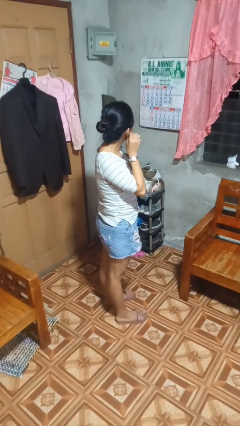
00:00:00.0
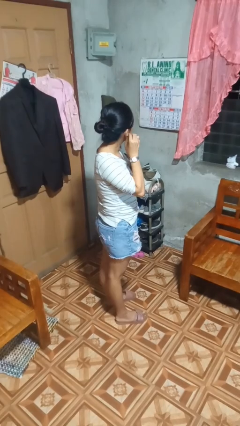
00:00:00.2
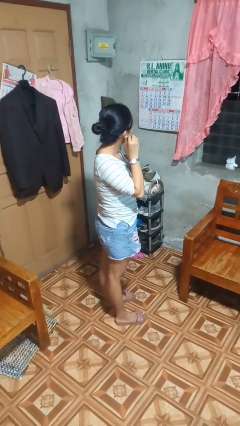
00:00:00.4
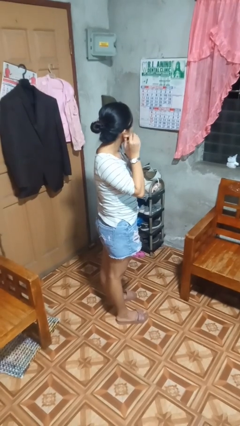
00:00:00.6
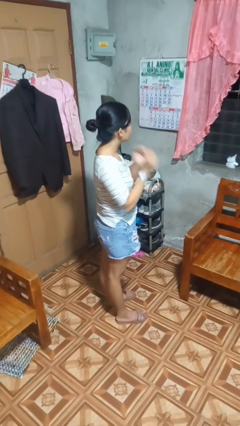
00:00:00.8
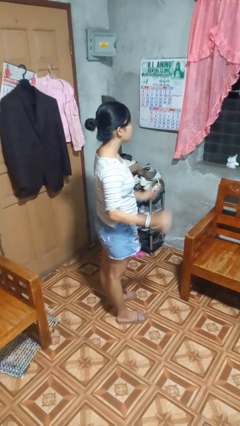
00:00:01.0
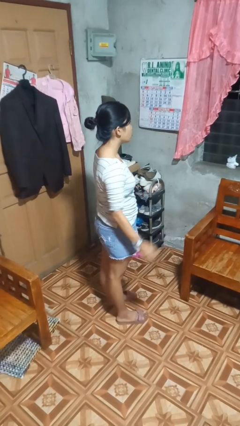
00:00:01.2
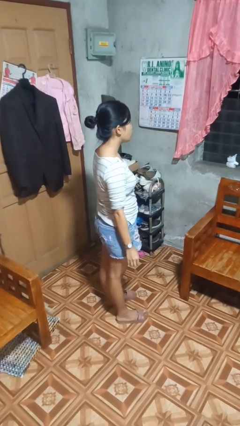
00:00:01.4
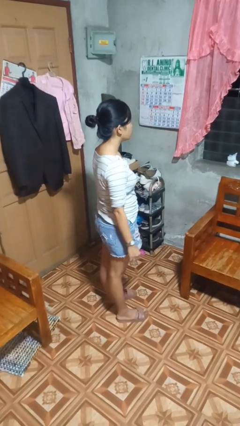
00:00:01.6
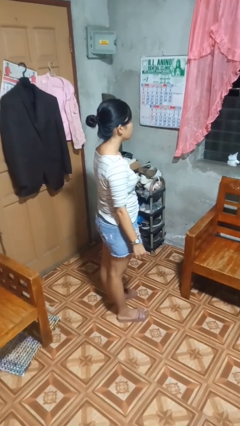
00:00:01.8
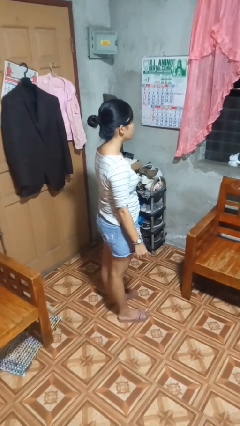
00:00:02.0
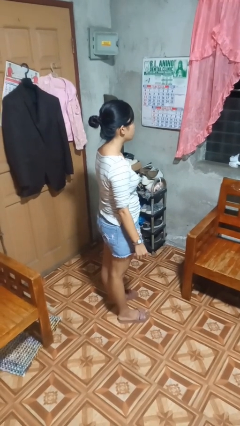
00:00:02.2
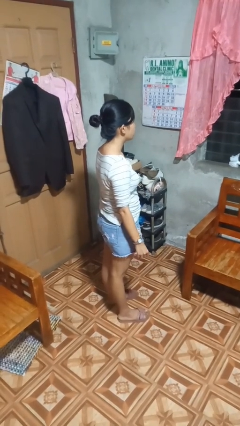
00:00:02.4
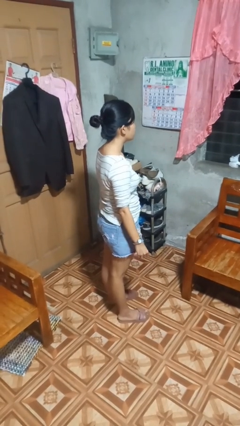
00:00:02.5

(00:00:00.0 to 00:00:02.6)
person takes off earrings

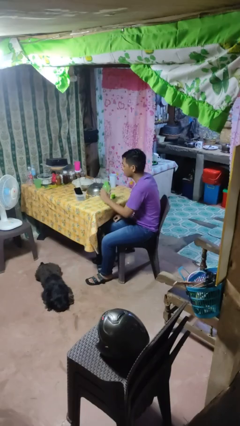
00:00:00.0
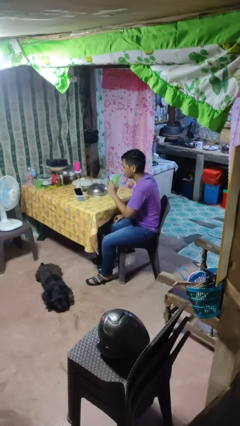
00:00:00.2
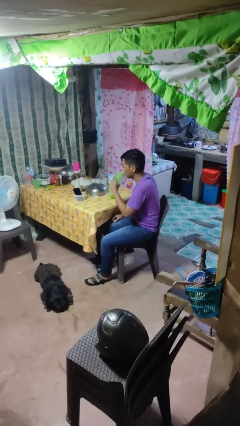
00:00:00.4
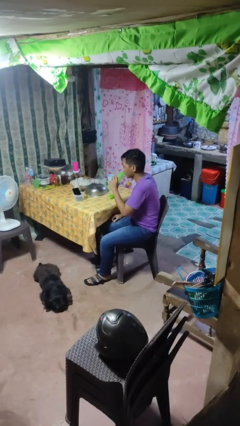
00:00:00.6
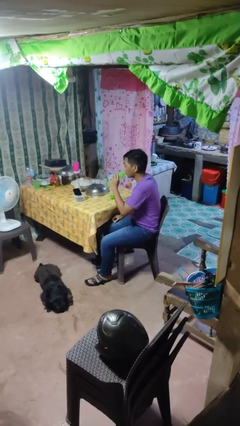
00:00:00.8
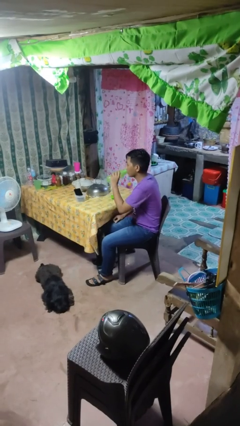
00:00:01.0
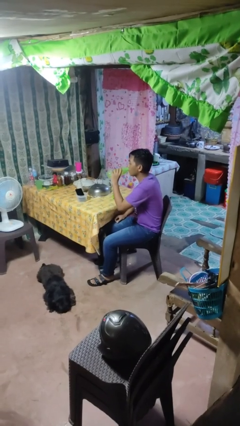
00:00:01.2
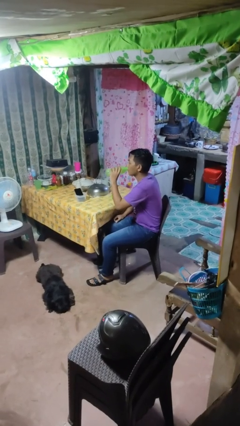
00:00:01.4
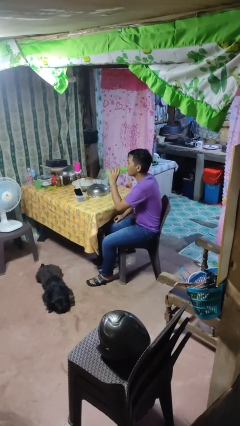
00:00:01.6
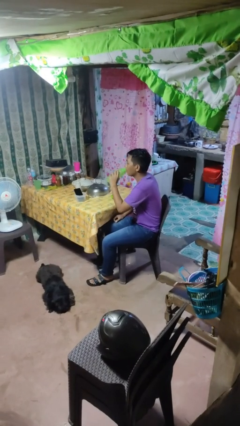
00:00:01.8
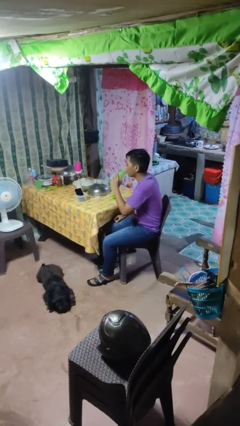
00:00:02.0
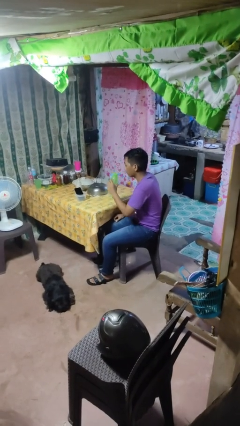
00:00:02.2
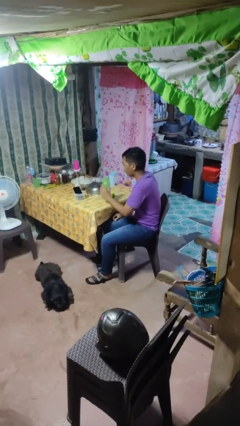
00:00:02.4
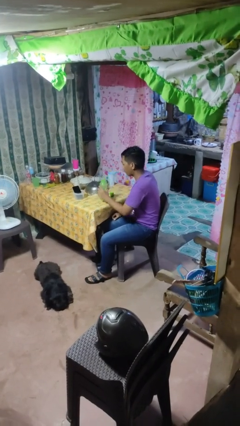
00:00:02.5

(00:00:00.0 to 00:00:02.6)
person drinks from bottle

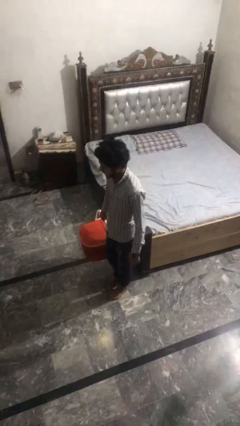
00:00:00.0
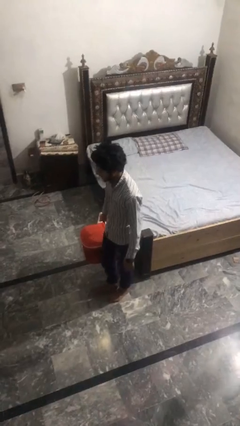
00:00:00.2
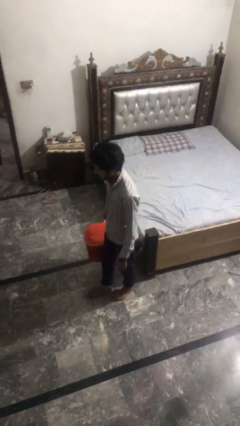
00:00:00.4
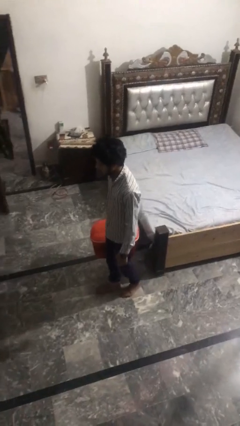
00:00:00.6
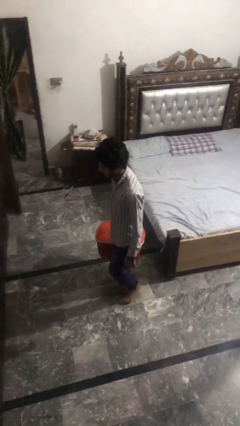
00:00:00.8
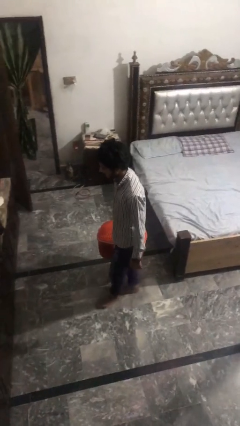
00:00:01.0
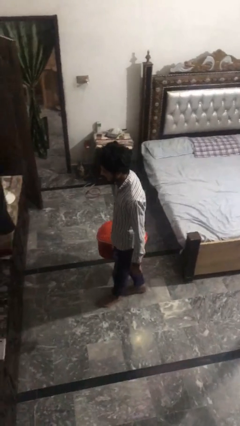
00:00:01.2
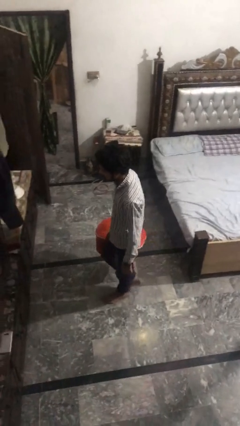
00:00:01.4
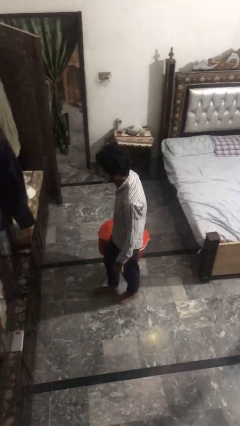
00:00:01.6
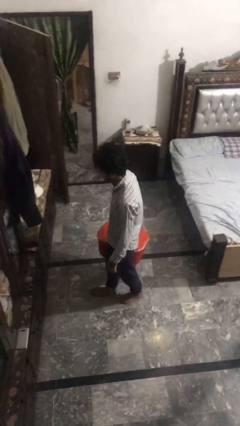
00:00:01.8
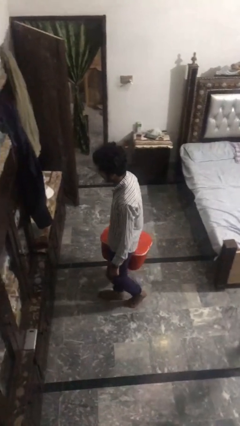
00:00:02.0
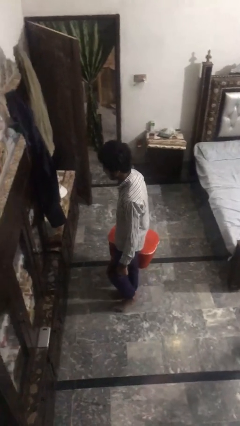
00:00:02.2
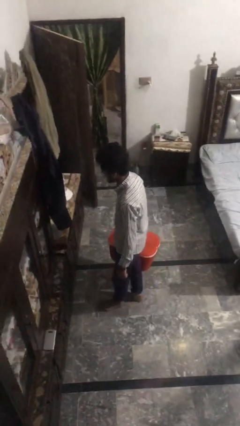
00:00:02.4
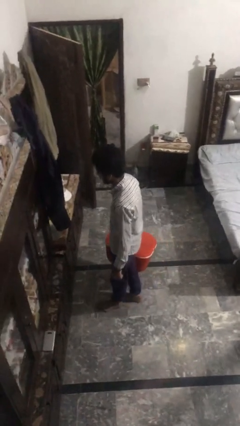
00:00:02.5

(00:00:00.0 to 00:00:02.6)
person carries laundry basket

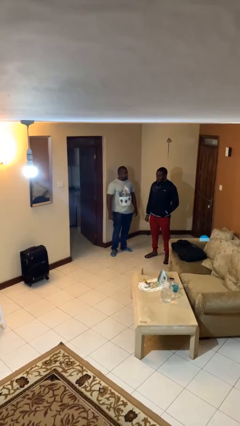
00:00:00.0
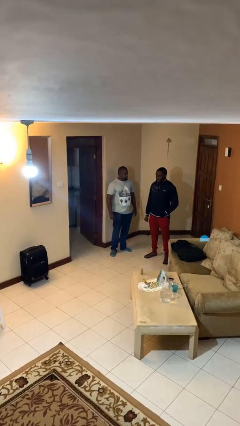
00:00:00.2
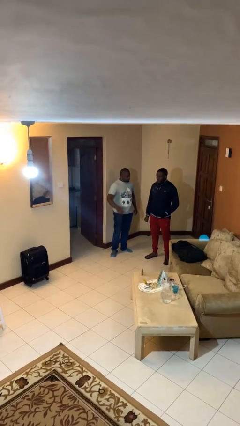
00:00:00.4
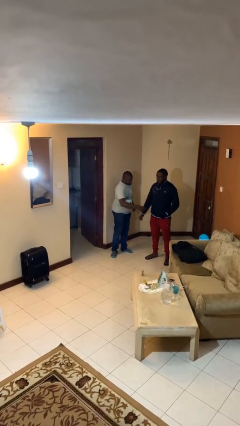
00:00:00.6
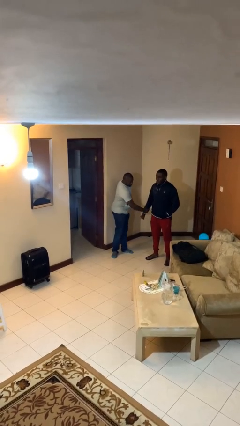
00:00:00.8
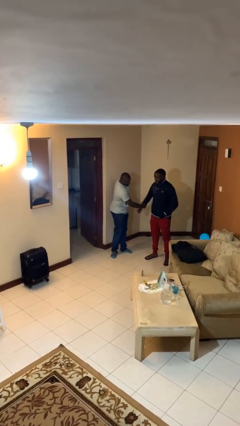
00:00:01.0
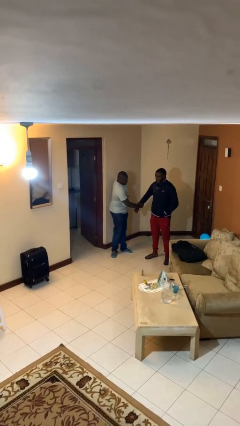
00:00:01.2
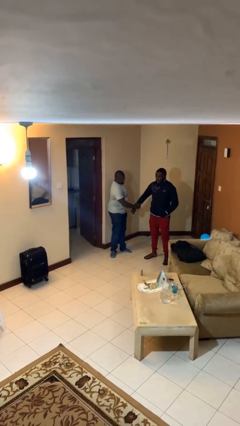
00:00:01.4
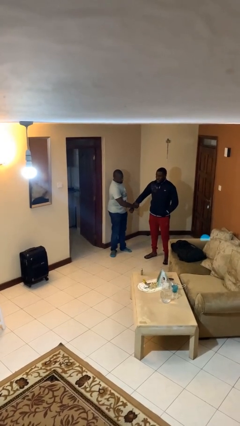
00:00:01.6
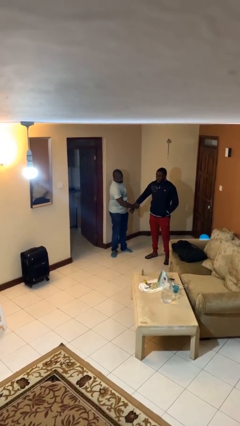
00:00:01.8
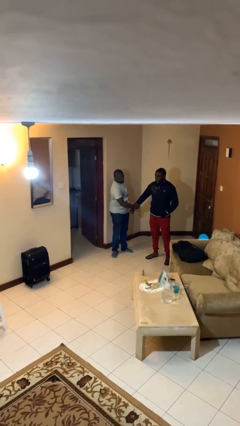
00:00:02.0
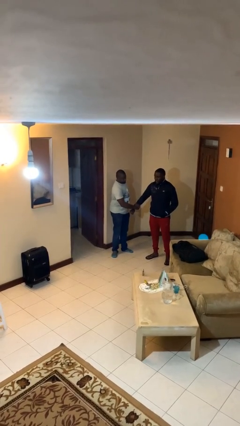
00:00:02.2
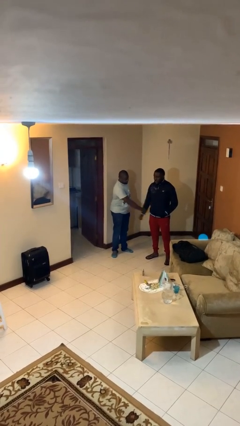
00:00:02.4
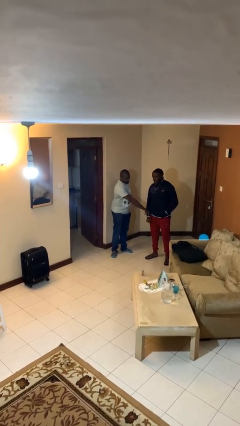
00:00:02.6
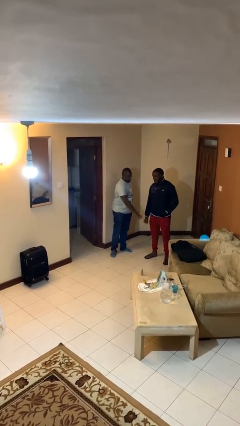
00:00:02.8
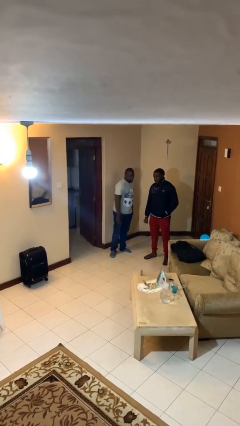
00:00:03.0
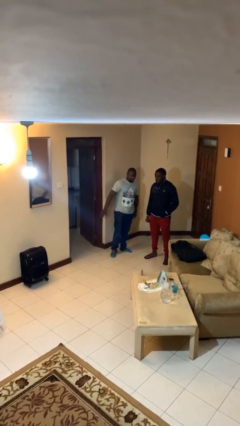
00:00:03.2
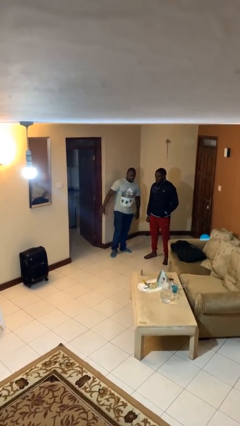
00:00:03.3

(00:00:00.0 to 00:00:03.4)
person grabs person by forearm

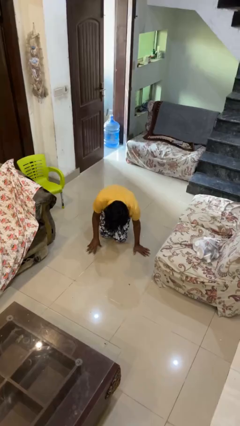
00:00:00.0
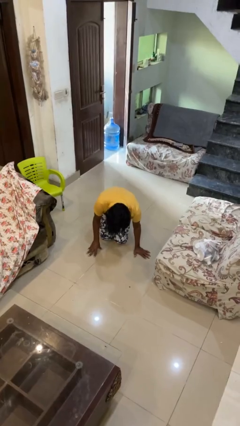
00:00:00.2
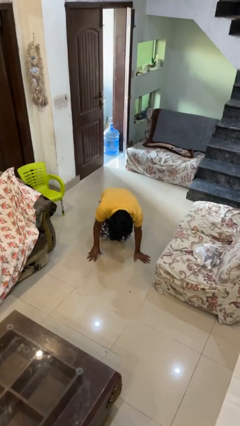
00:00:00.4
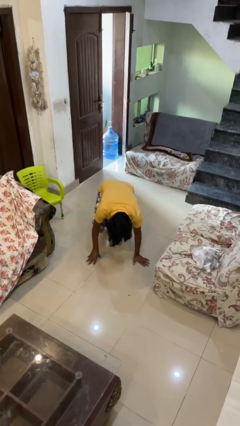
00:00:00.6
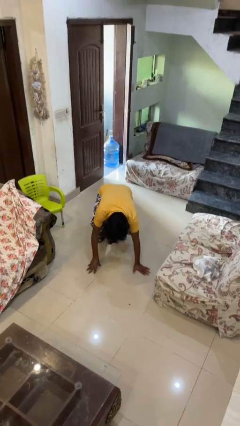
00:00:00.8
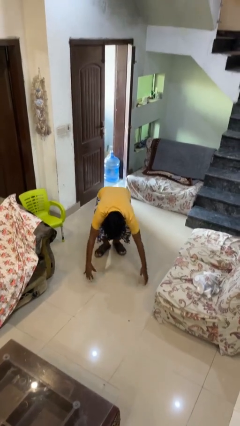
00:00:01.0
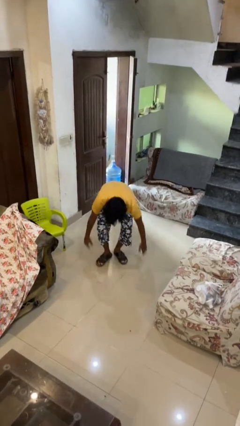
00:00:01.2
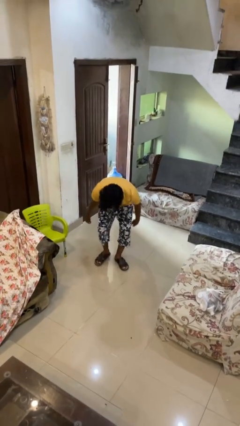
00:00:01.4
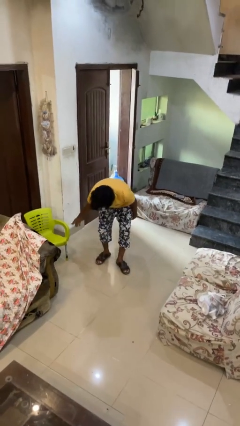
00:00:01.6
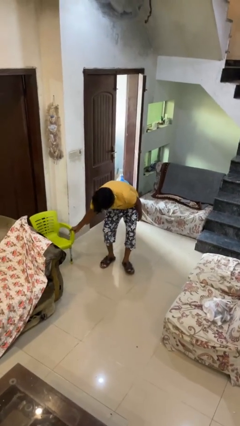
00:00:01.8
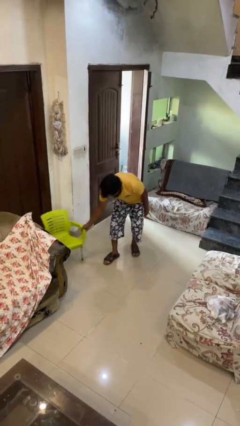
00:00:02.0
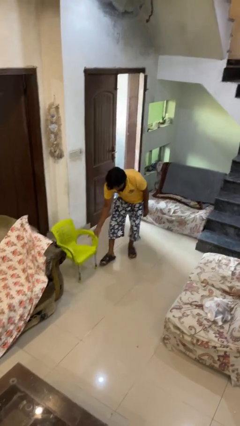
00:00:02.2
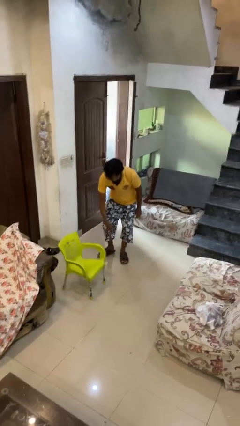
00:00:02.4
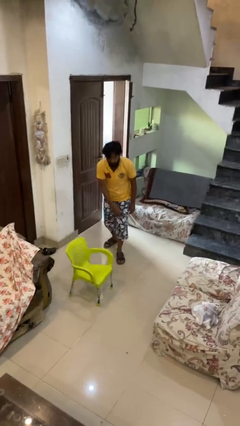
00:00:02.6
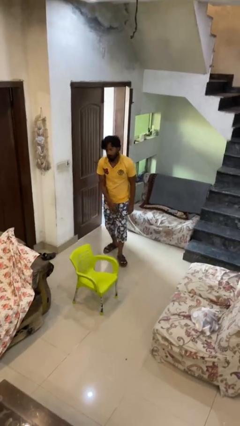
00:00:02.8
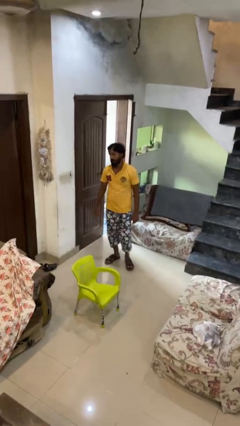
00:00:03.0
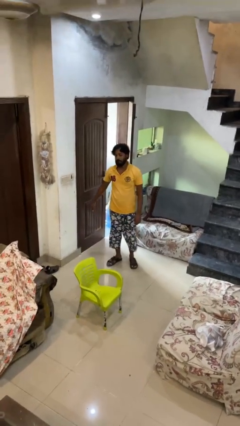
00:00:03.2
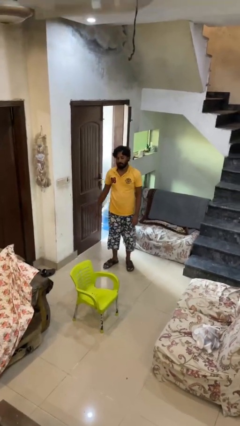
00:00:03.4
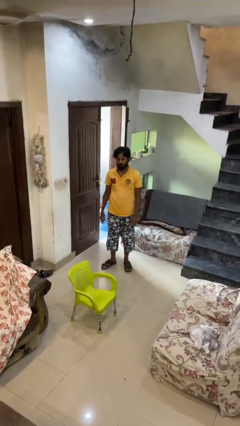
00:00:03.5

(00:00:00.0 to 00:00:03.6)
person stands up from floor

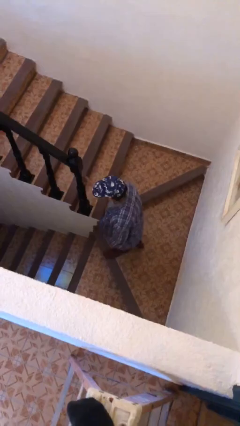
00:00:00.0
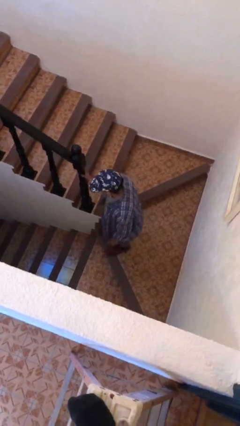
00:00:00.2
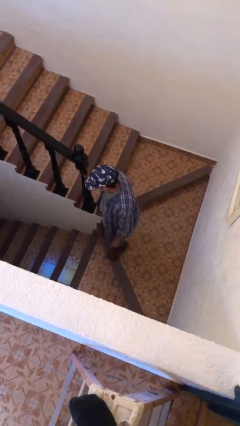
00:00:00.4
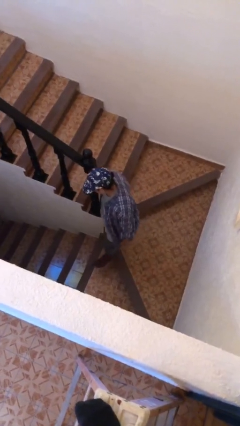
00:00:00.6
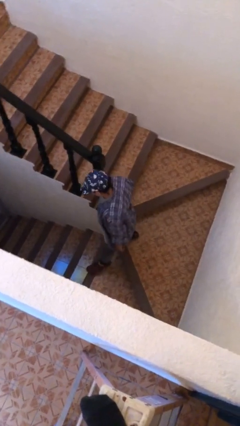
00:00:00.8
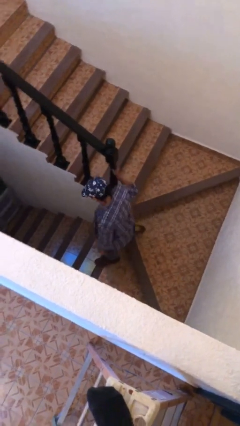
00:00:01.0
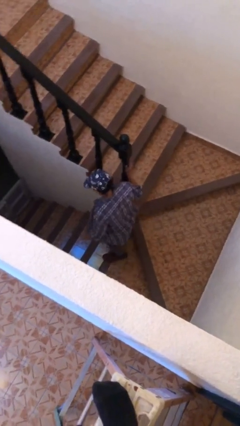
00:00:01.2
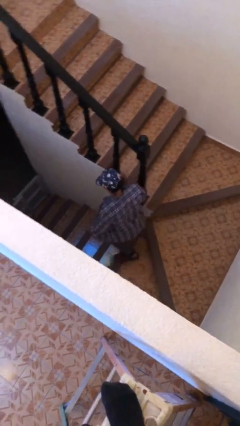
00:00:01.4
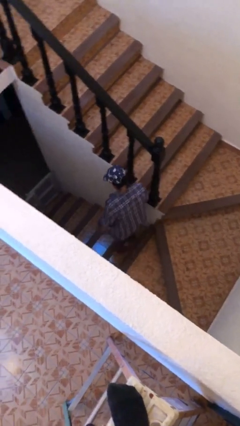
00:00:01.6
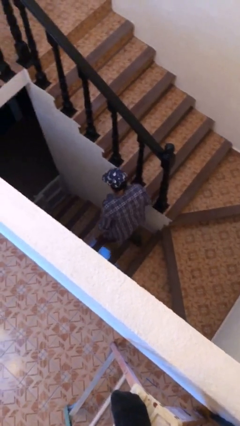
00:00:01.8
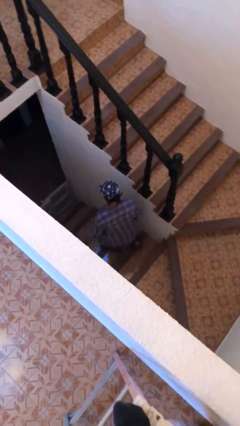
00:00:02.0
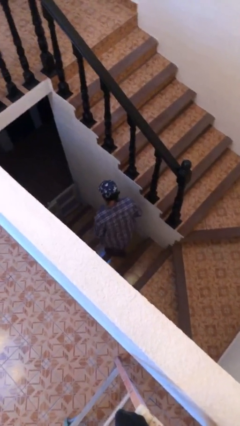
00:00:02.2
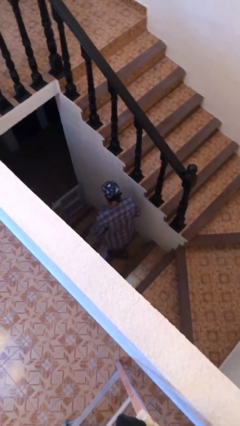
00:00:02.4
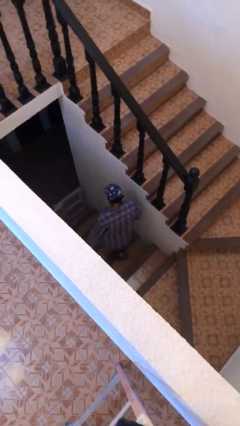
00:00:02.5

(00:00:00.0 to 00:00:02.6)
person climbs down stairs
